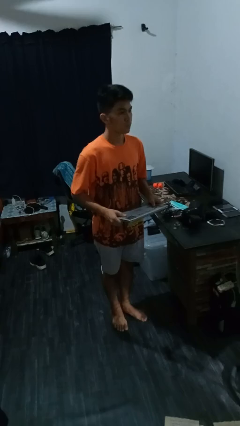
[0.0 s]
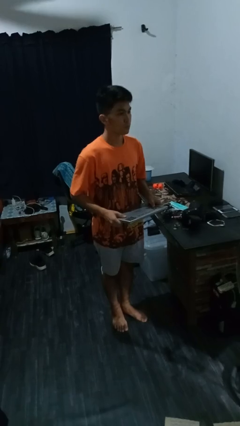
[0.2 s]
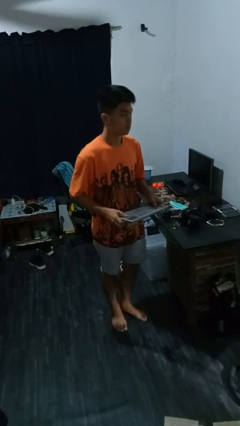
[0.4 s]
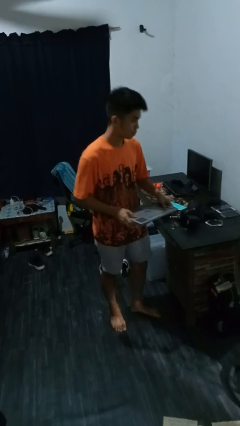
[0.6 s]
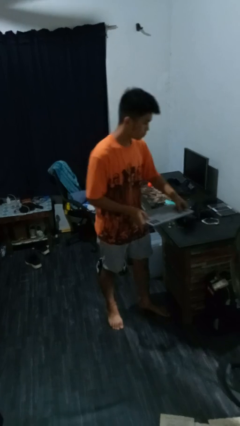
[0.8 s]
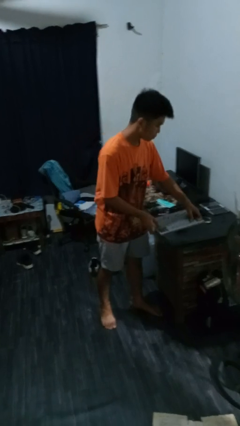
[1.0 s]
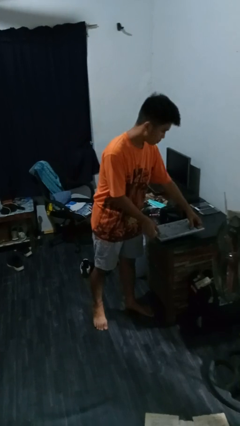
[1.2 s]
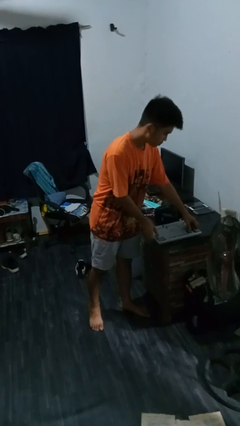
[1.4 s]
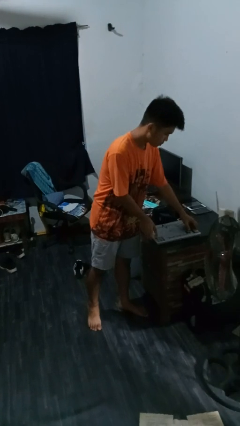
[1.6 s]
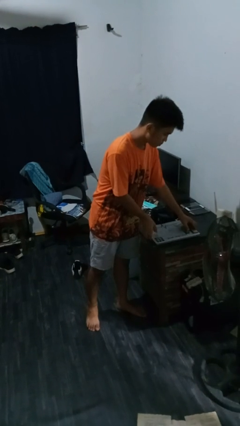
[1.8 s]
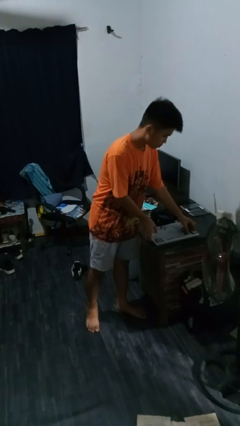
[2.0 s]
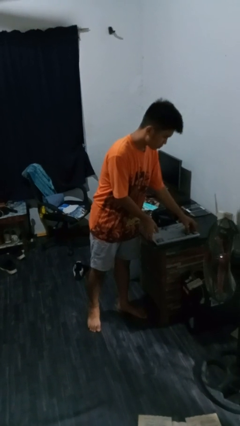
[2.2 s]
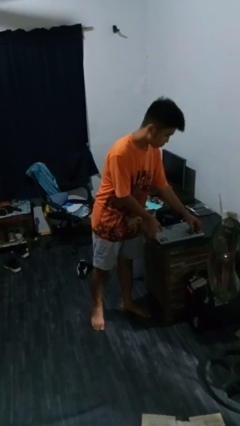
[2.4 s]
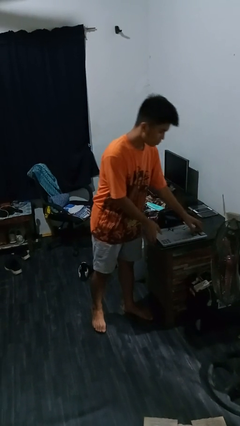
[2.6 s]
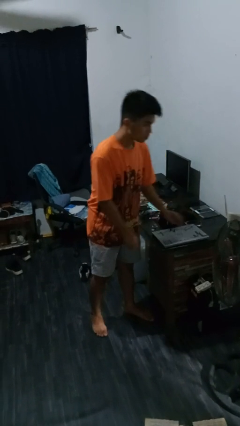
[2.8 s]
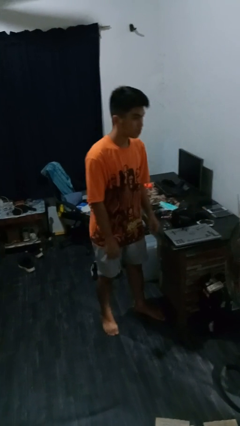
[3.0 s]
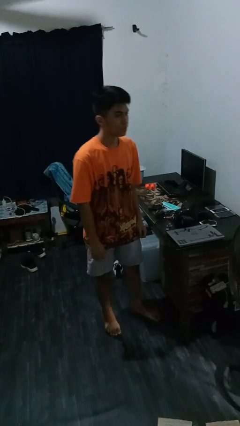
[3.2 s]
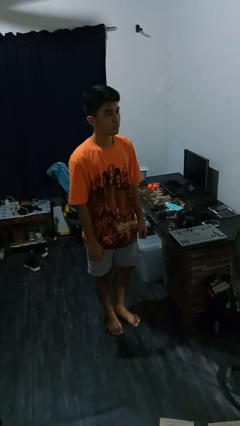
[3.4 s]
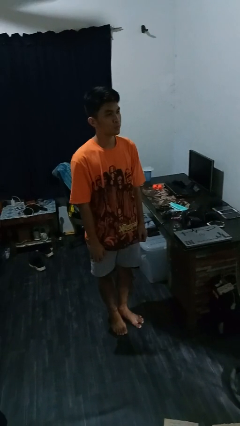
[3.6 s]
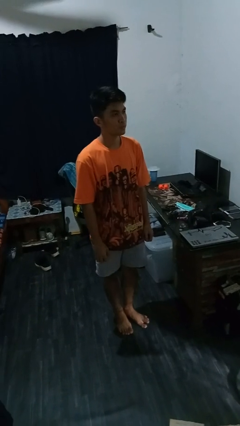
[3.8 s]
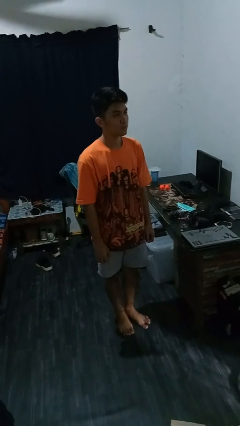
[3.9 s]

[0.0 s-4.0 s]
person puts down object on countertop

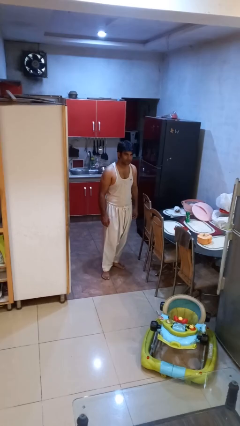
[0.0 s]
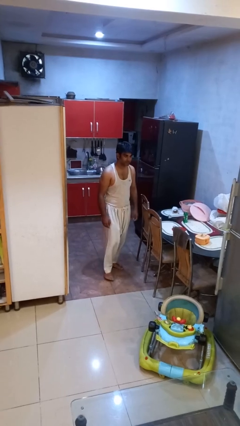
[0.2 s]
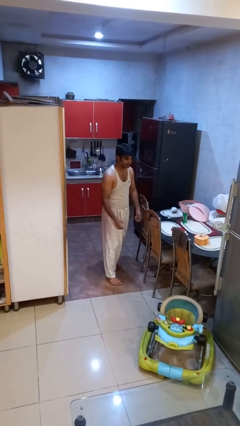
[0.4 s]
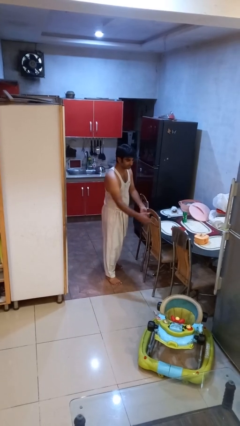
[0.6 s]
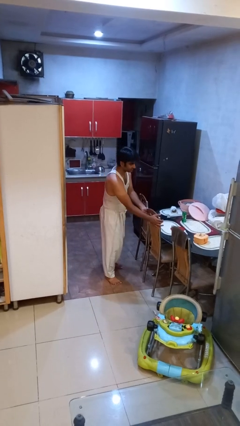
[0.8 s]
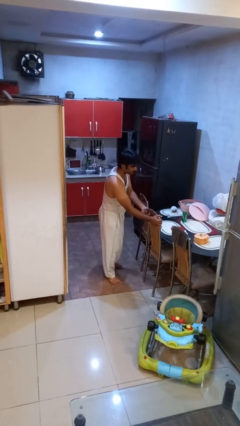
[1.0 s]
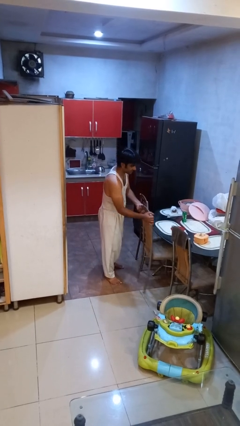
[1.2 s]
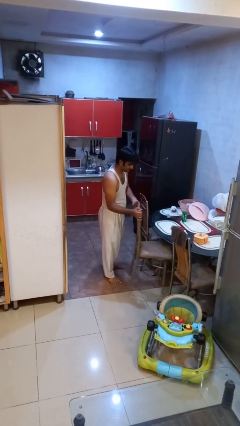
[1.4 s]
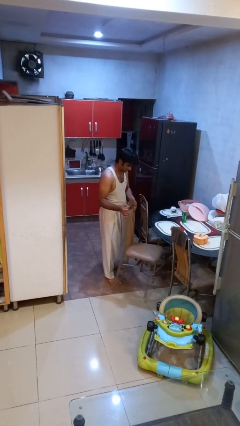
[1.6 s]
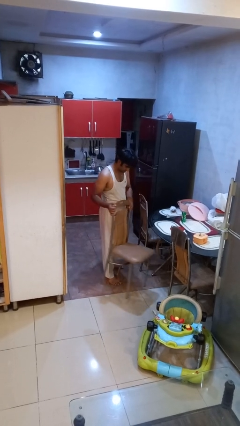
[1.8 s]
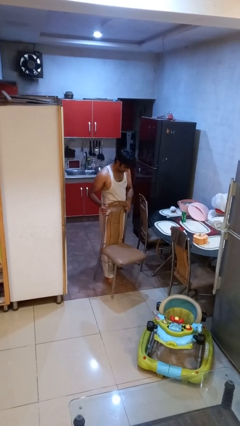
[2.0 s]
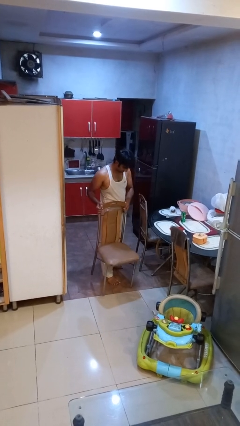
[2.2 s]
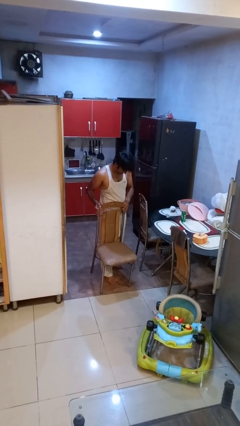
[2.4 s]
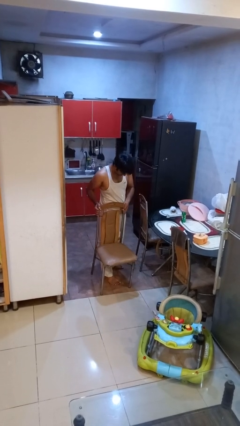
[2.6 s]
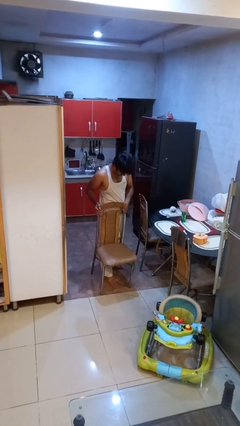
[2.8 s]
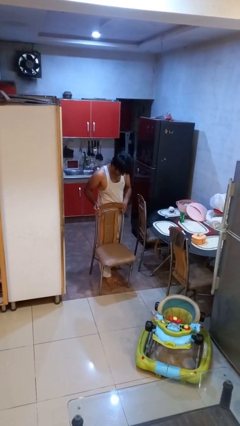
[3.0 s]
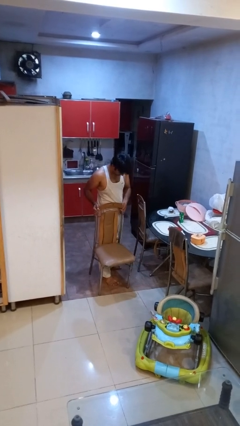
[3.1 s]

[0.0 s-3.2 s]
person pulls out chair

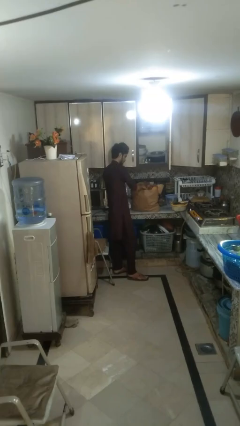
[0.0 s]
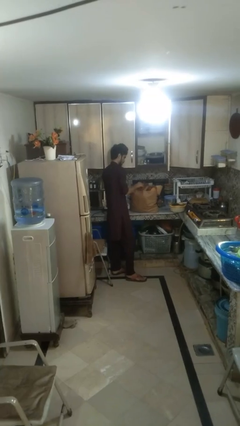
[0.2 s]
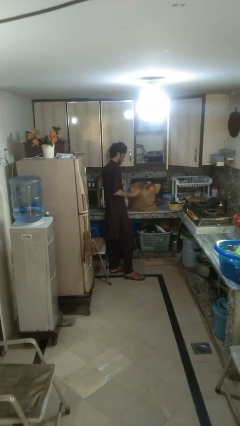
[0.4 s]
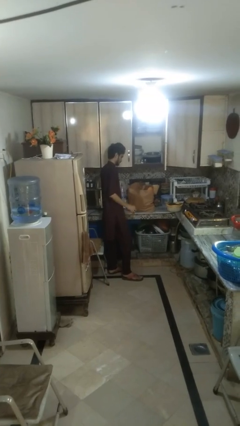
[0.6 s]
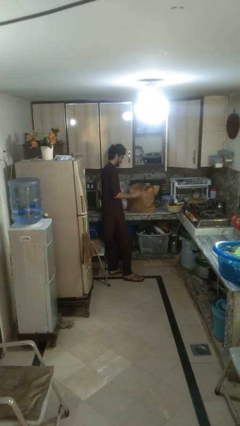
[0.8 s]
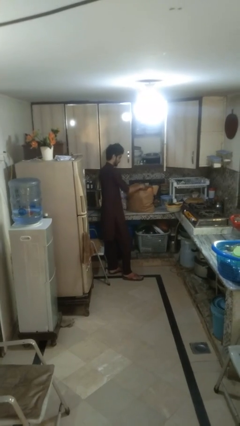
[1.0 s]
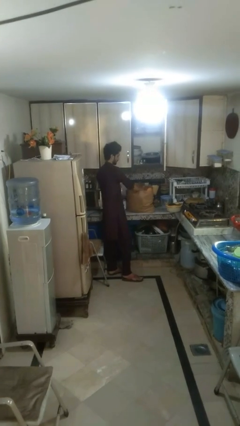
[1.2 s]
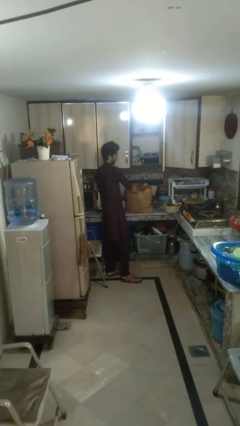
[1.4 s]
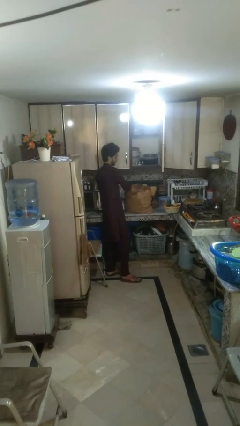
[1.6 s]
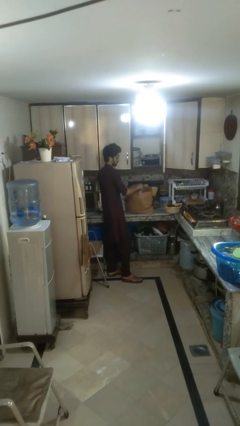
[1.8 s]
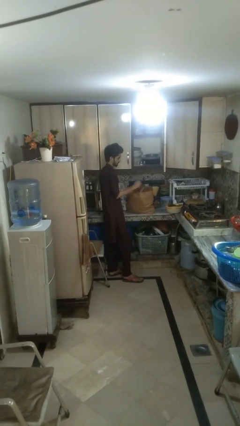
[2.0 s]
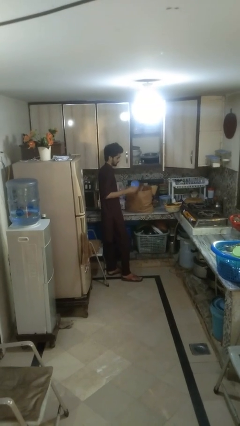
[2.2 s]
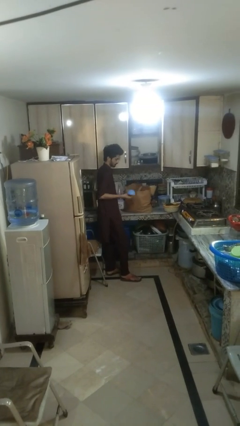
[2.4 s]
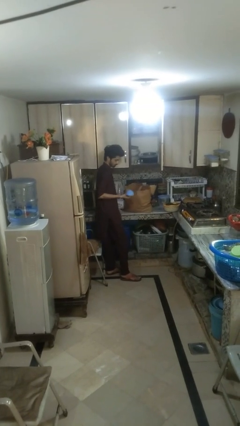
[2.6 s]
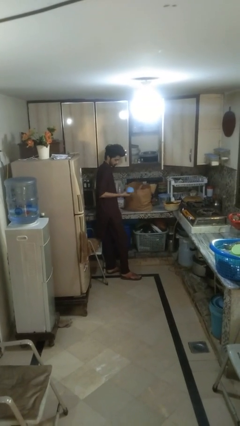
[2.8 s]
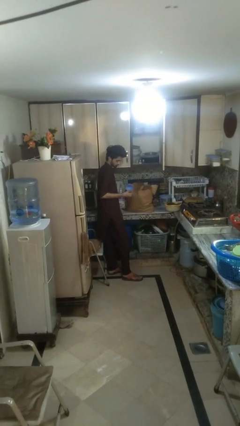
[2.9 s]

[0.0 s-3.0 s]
person takes object from bag

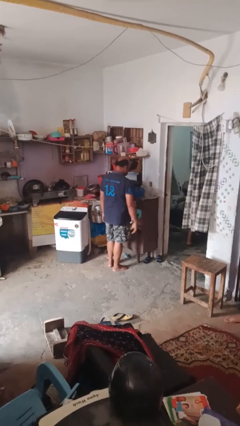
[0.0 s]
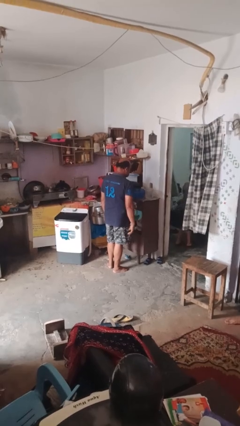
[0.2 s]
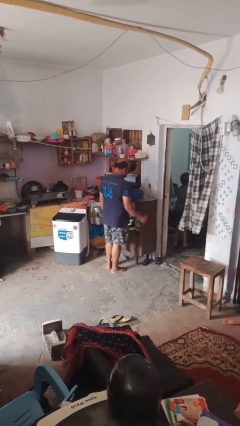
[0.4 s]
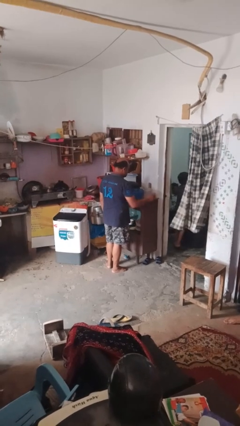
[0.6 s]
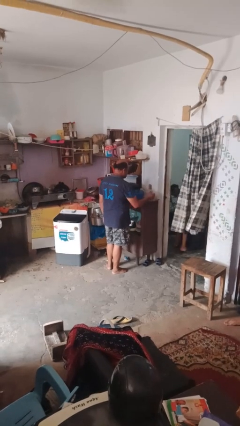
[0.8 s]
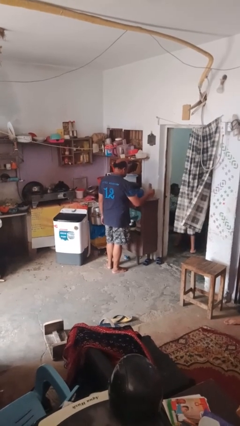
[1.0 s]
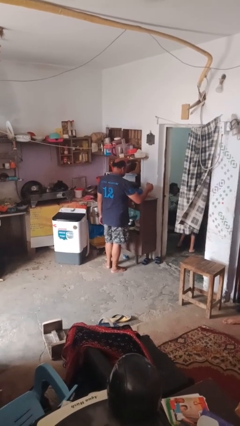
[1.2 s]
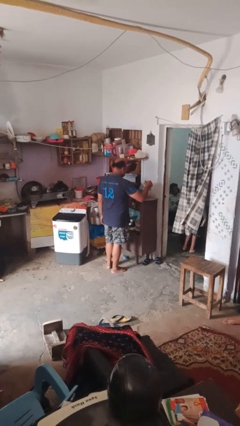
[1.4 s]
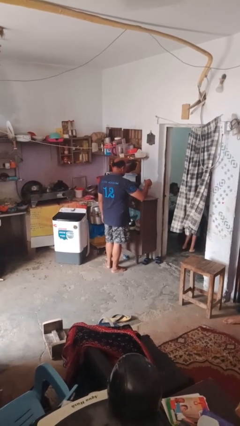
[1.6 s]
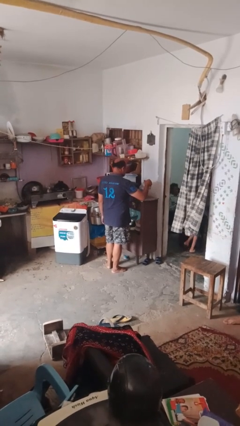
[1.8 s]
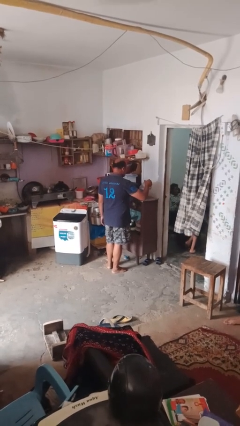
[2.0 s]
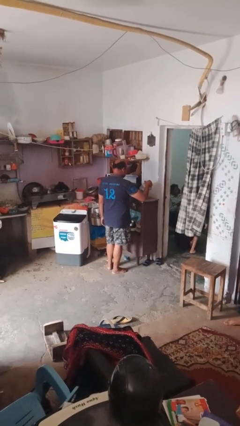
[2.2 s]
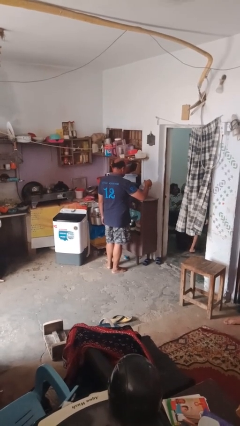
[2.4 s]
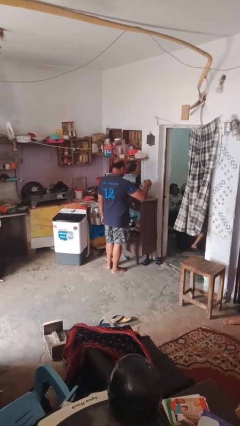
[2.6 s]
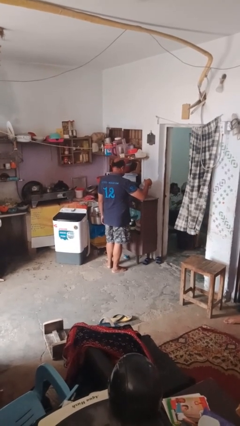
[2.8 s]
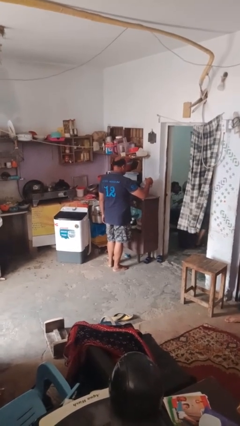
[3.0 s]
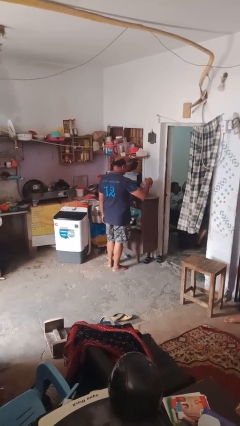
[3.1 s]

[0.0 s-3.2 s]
person pours into bowl

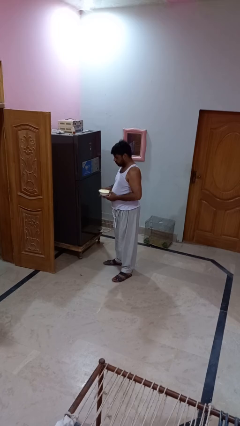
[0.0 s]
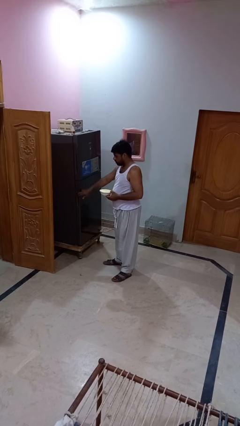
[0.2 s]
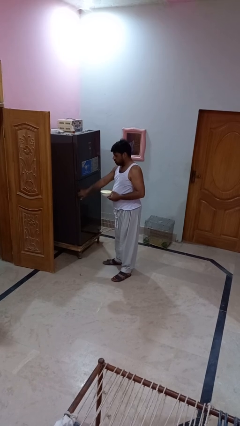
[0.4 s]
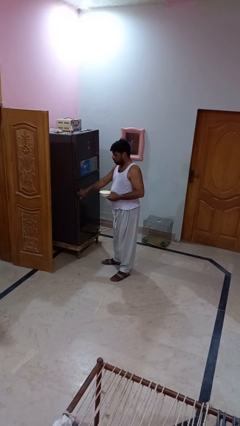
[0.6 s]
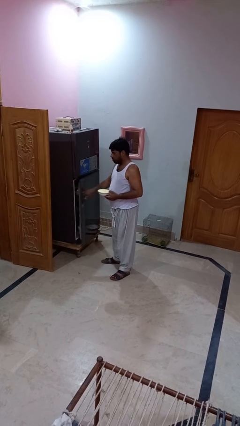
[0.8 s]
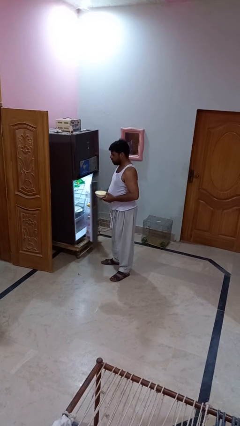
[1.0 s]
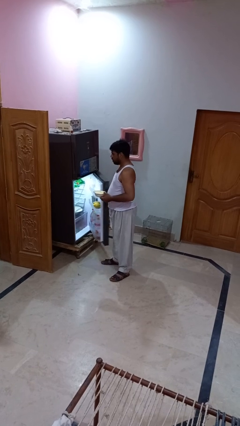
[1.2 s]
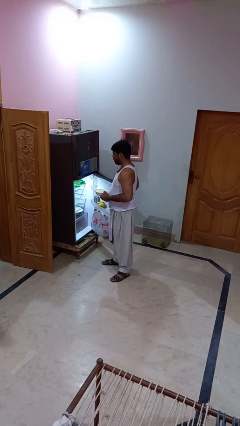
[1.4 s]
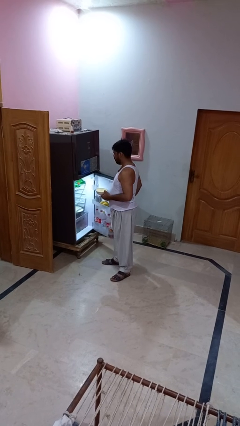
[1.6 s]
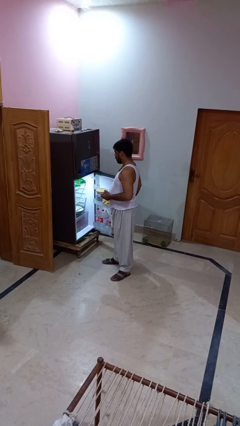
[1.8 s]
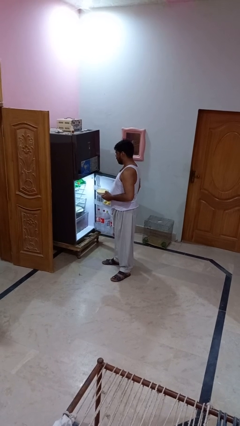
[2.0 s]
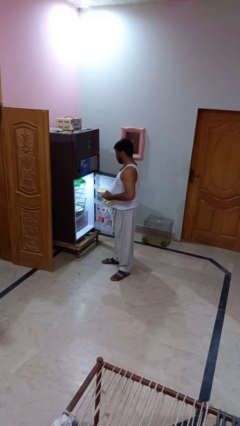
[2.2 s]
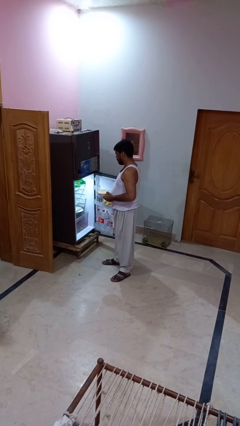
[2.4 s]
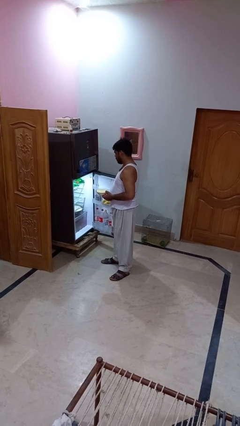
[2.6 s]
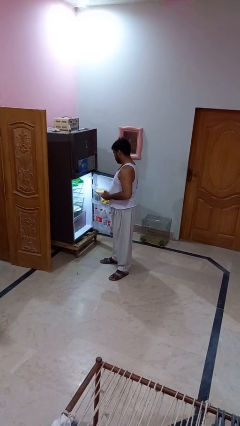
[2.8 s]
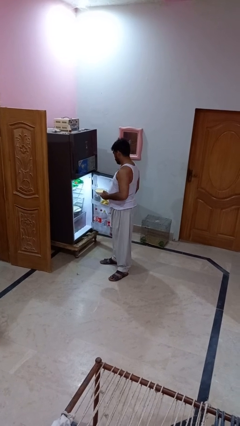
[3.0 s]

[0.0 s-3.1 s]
person opens refrigerator

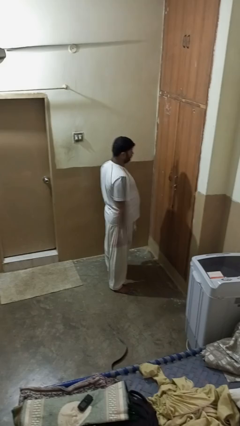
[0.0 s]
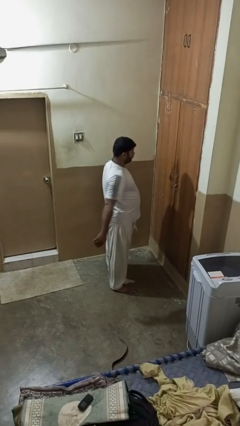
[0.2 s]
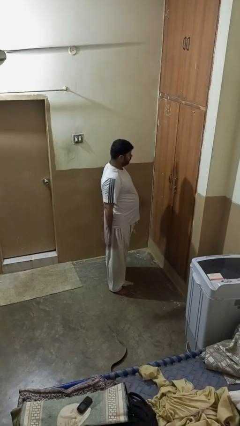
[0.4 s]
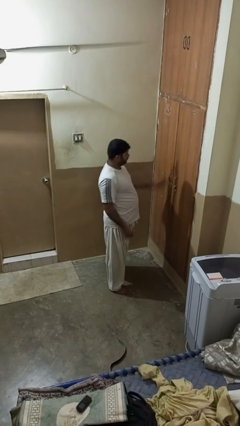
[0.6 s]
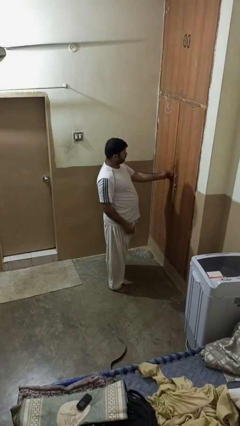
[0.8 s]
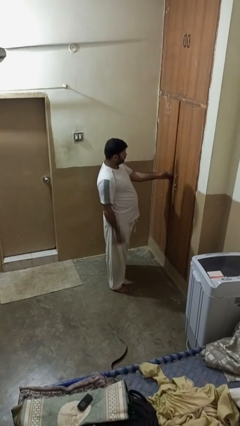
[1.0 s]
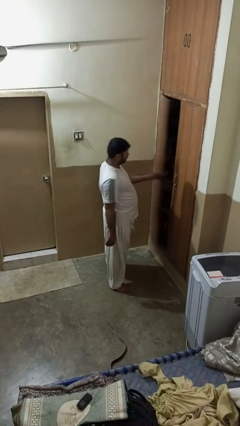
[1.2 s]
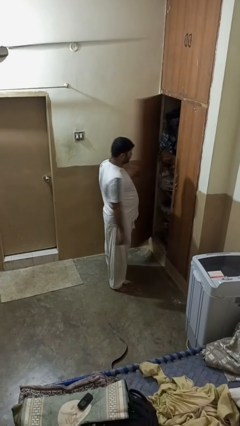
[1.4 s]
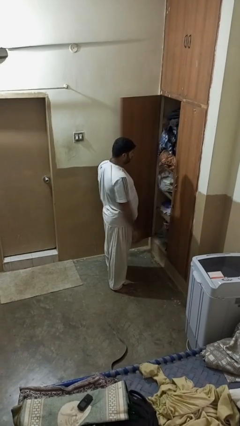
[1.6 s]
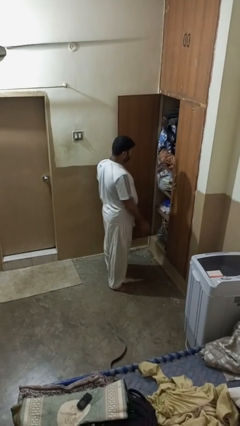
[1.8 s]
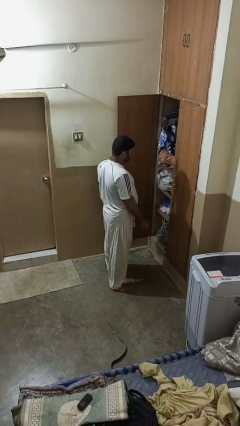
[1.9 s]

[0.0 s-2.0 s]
person opens closet door
